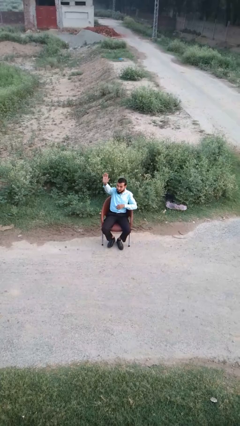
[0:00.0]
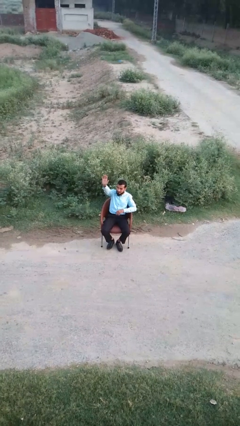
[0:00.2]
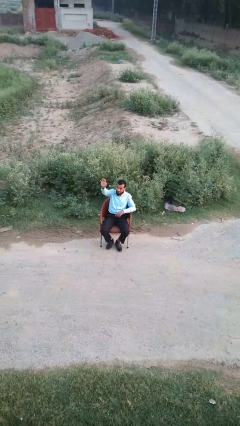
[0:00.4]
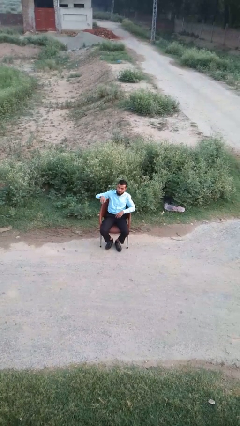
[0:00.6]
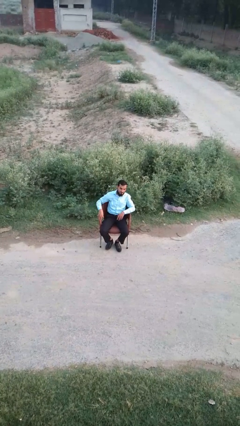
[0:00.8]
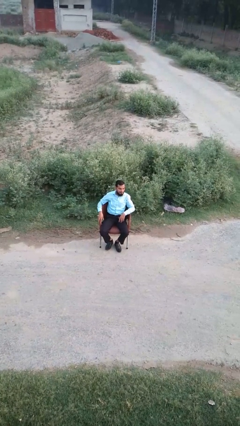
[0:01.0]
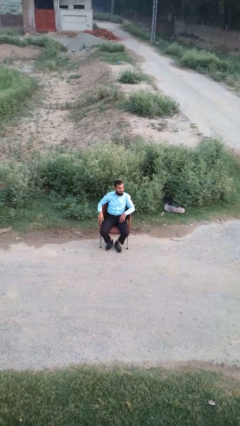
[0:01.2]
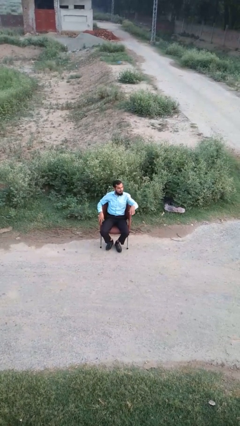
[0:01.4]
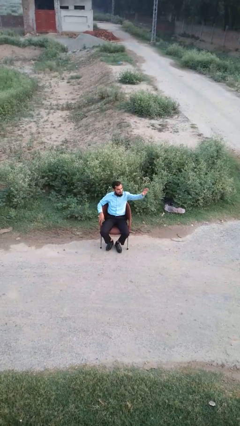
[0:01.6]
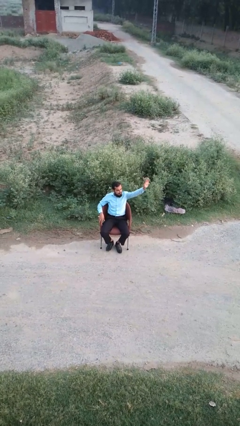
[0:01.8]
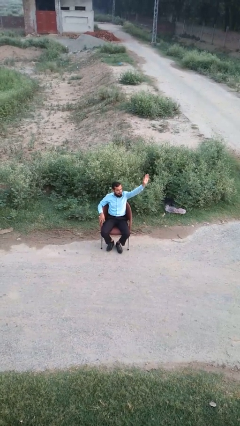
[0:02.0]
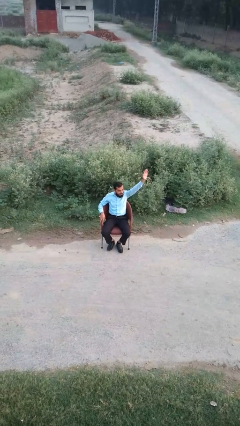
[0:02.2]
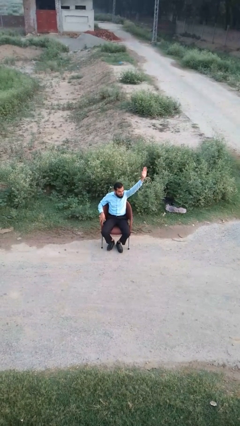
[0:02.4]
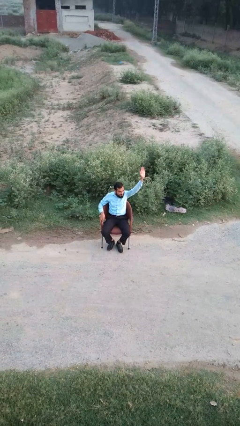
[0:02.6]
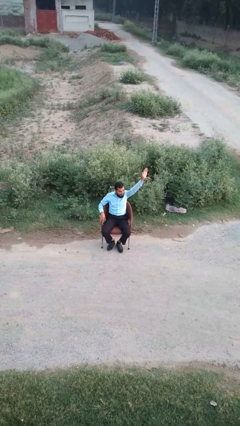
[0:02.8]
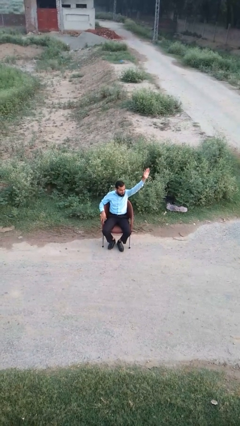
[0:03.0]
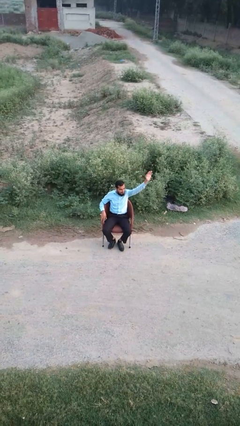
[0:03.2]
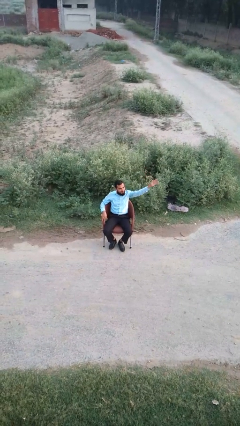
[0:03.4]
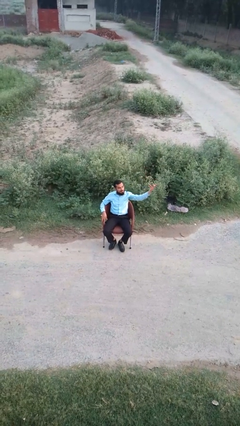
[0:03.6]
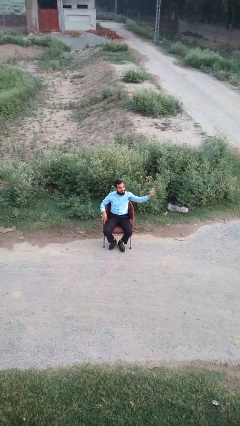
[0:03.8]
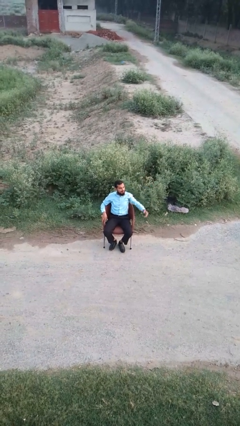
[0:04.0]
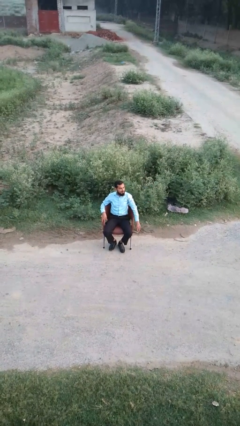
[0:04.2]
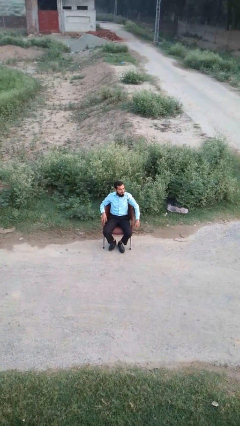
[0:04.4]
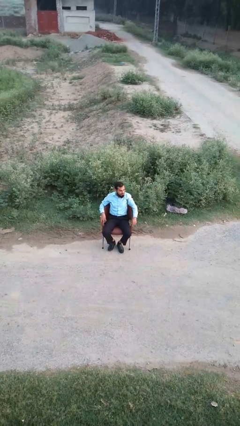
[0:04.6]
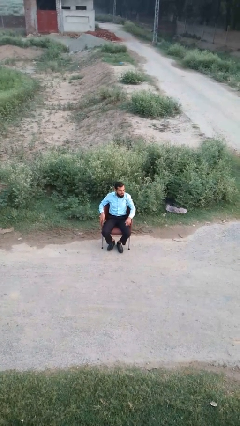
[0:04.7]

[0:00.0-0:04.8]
person gestures lower hand

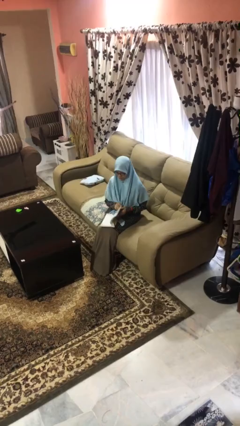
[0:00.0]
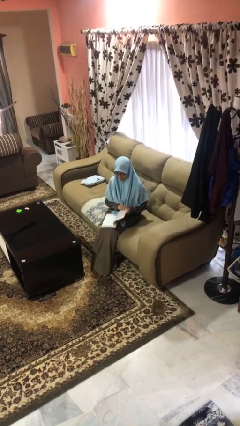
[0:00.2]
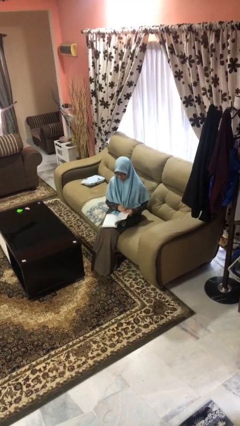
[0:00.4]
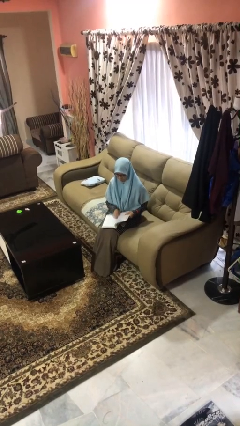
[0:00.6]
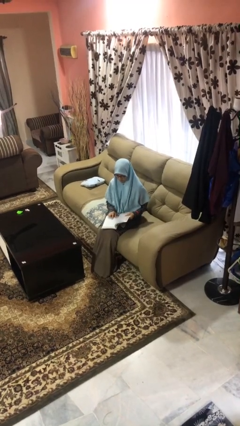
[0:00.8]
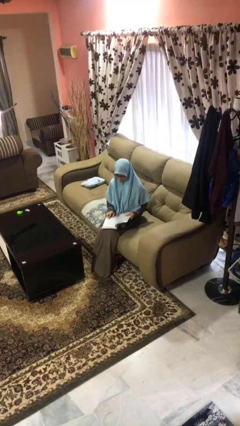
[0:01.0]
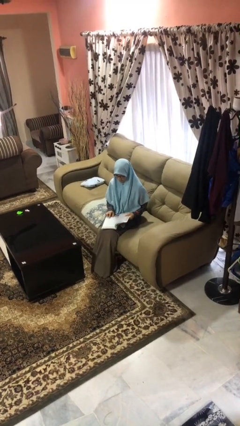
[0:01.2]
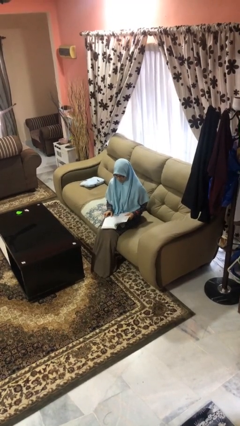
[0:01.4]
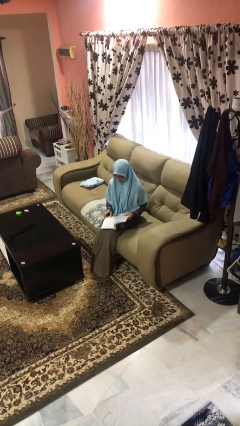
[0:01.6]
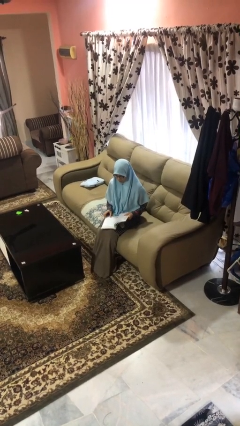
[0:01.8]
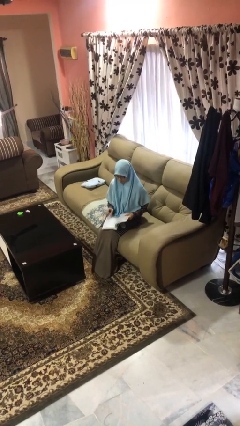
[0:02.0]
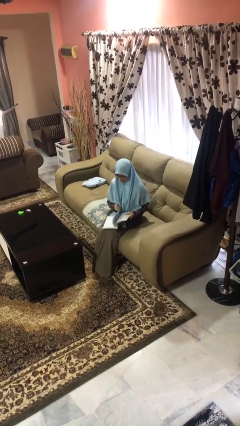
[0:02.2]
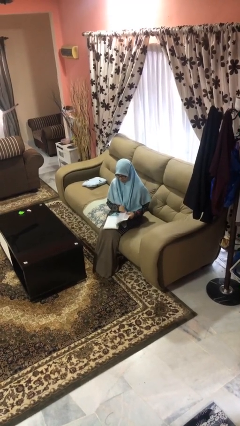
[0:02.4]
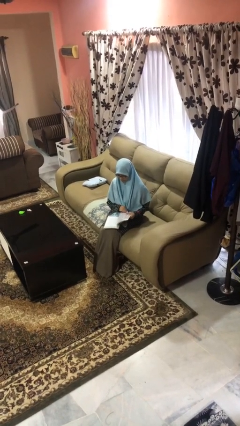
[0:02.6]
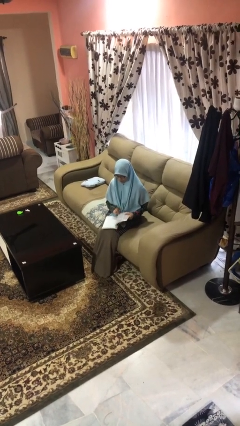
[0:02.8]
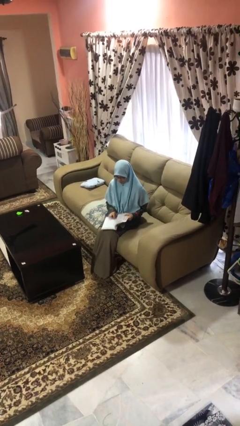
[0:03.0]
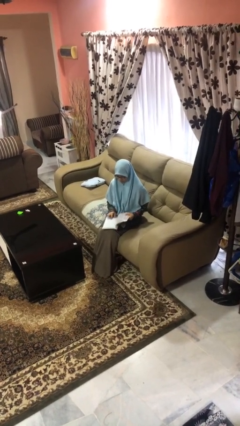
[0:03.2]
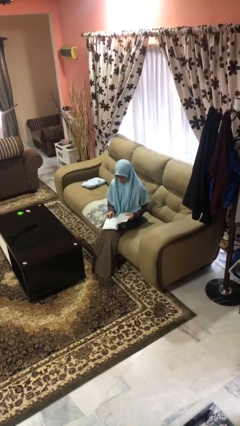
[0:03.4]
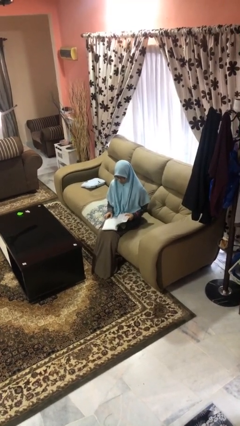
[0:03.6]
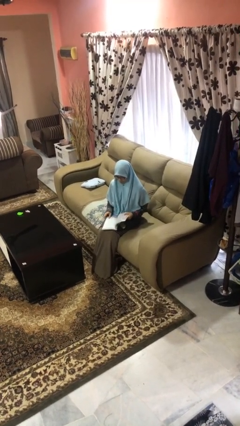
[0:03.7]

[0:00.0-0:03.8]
person reads magazine

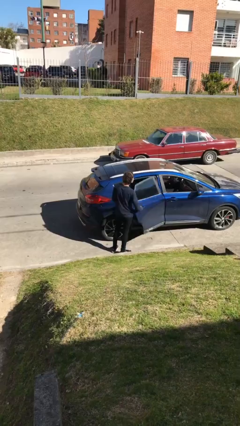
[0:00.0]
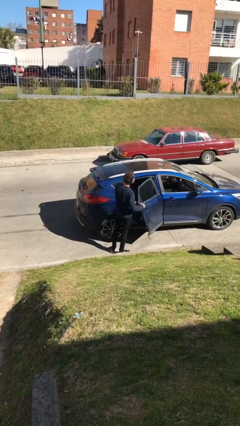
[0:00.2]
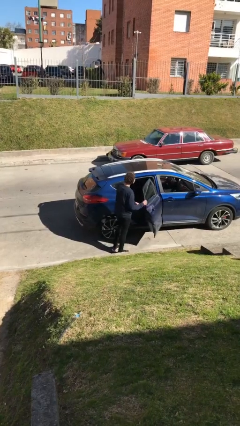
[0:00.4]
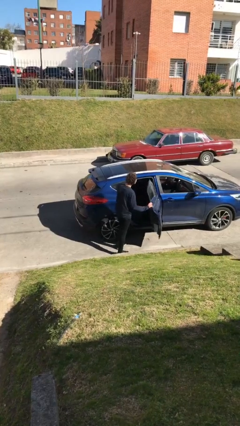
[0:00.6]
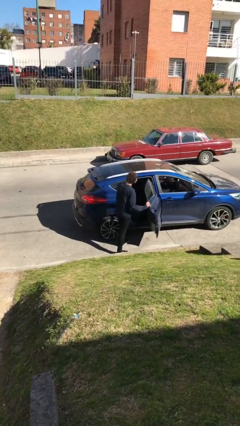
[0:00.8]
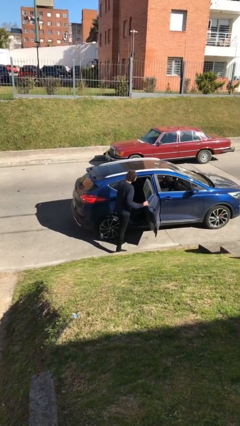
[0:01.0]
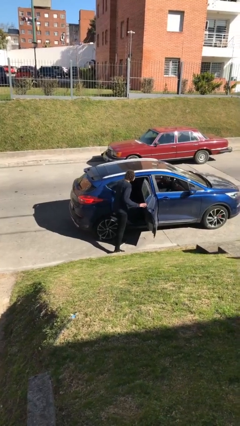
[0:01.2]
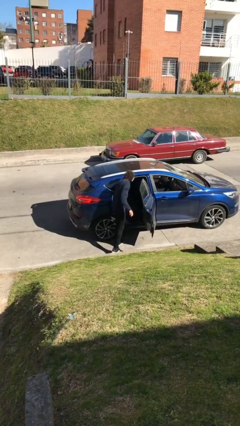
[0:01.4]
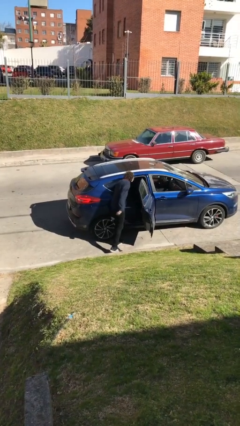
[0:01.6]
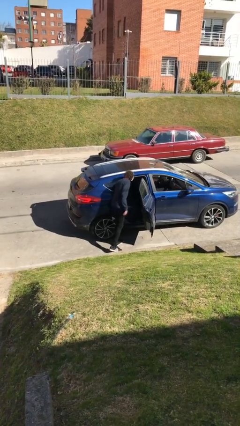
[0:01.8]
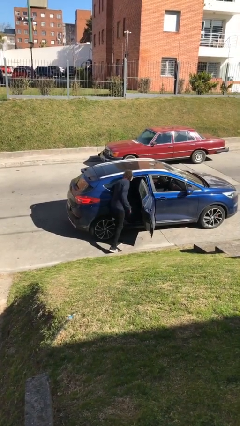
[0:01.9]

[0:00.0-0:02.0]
person opens car door

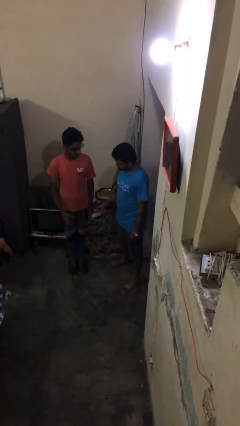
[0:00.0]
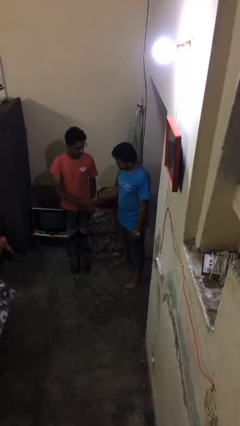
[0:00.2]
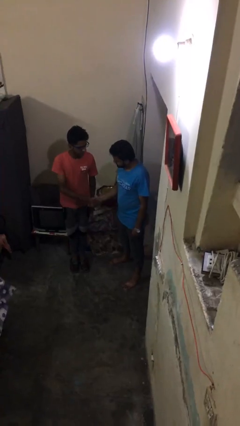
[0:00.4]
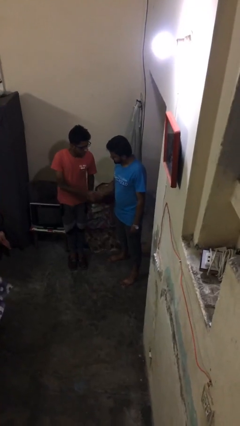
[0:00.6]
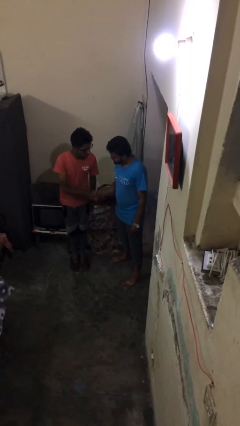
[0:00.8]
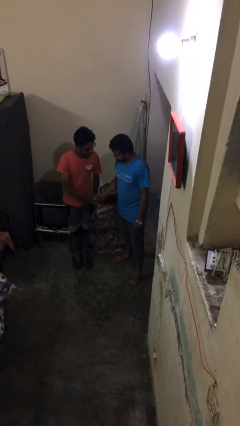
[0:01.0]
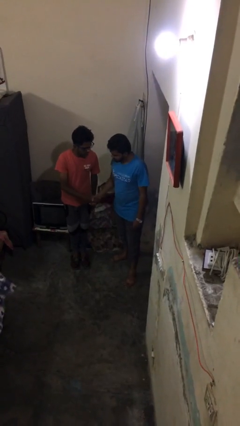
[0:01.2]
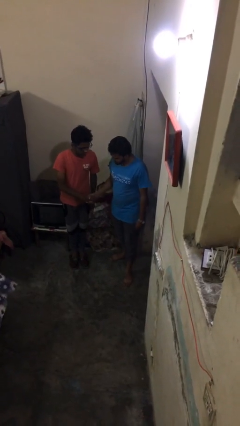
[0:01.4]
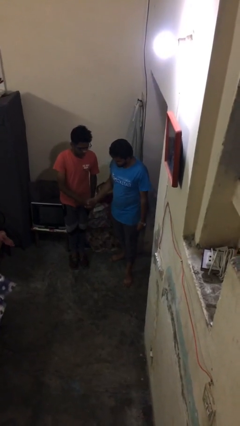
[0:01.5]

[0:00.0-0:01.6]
person shakes hand

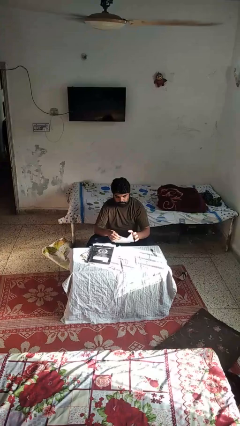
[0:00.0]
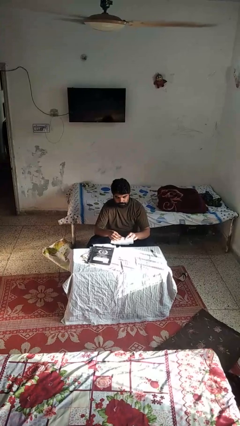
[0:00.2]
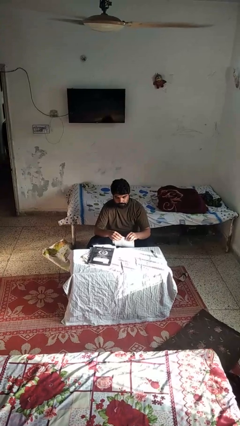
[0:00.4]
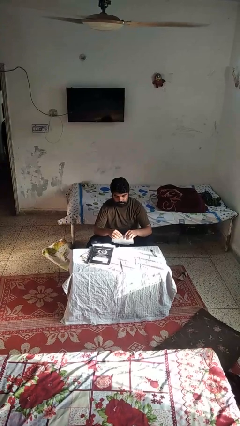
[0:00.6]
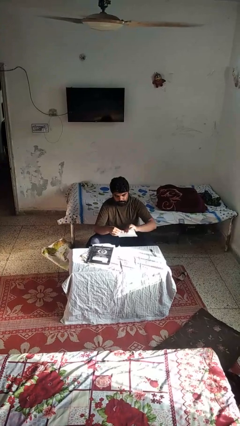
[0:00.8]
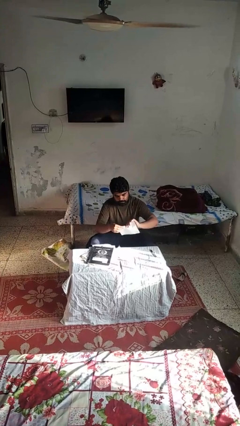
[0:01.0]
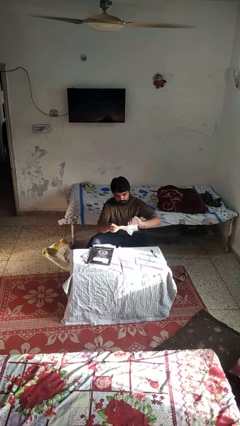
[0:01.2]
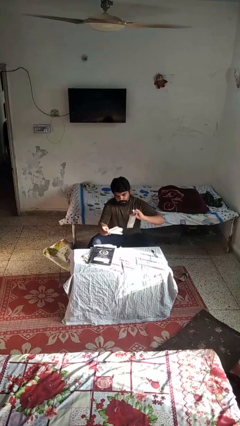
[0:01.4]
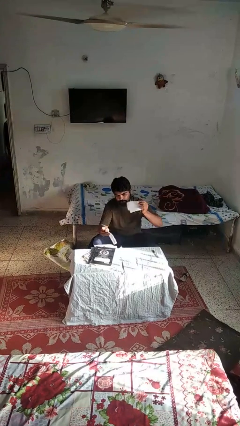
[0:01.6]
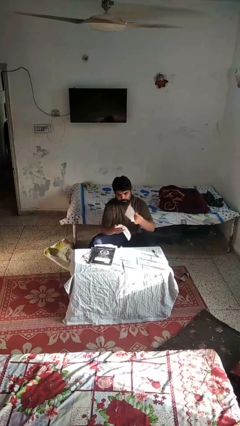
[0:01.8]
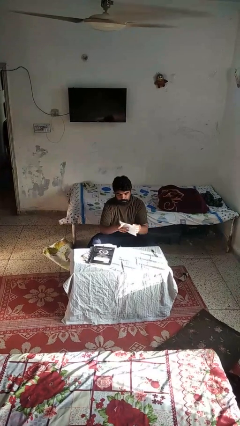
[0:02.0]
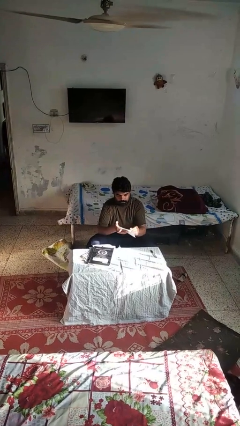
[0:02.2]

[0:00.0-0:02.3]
person tears paper

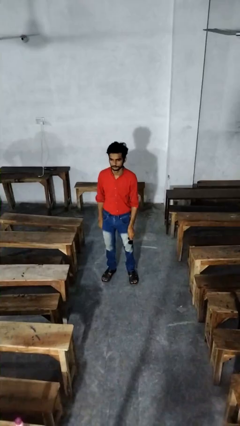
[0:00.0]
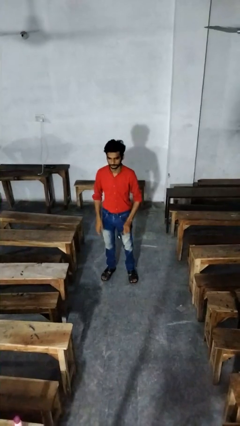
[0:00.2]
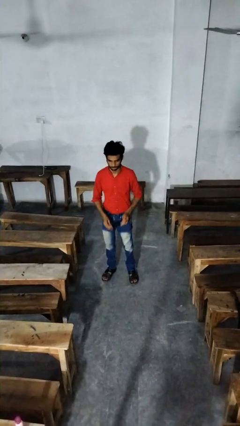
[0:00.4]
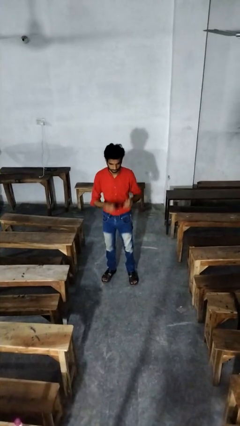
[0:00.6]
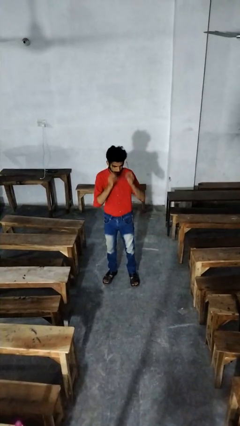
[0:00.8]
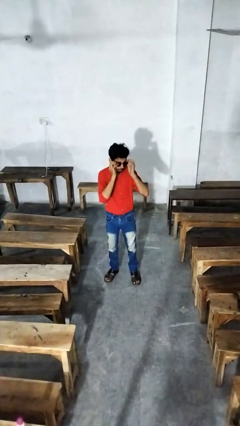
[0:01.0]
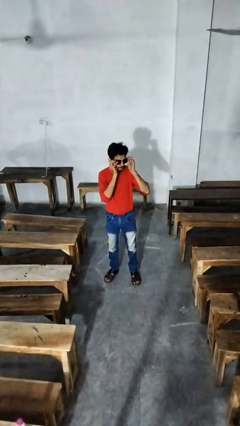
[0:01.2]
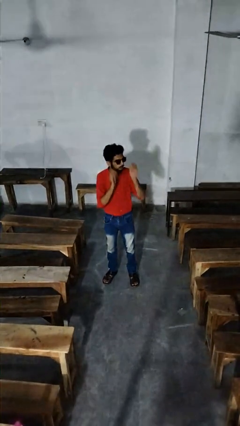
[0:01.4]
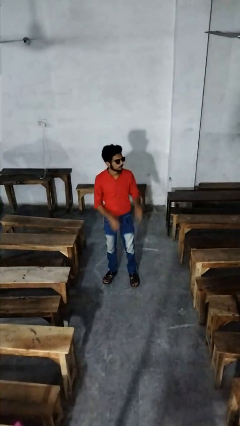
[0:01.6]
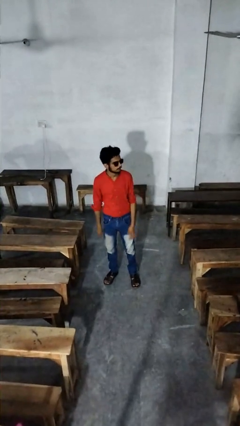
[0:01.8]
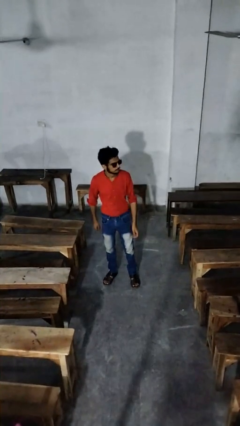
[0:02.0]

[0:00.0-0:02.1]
person puts on sunglasses

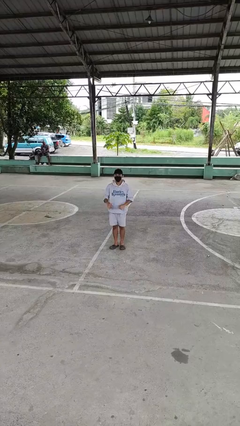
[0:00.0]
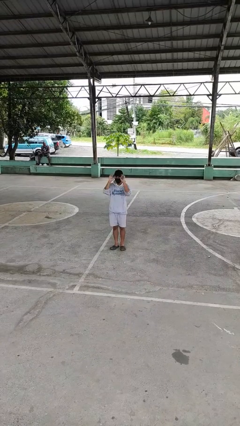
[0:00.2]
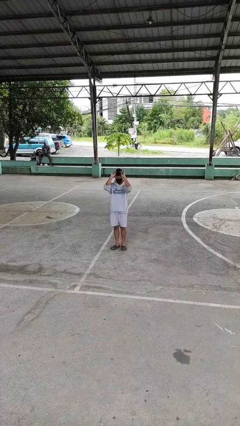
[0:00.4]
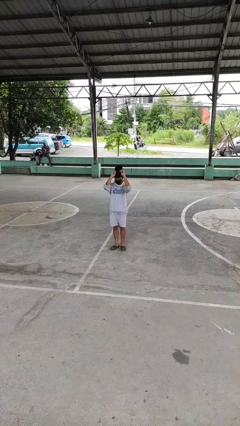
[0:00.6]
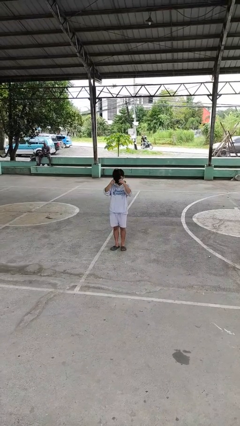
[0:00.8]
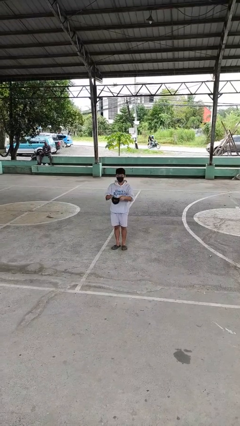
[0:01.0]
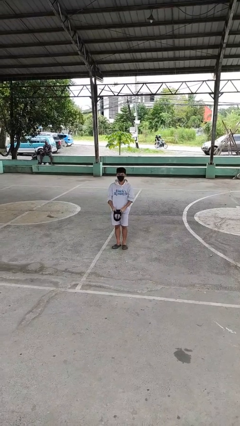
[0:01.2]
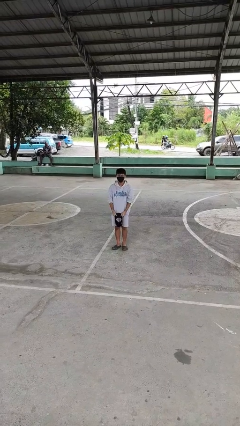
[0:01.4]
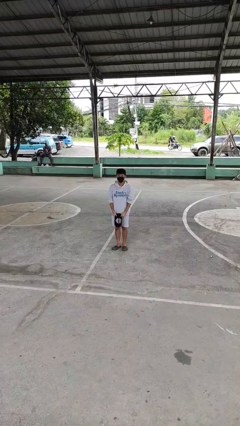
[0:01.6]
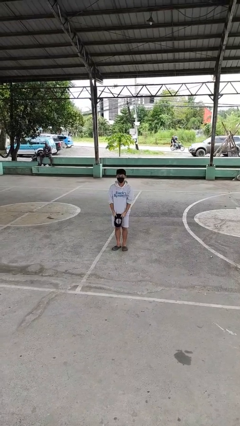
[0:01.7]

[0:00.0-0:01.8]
person takes off hat
